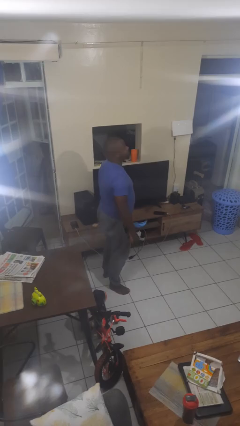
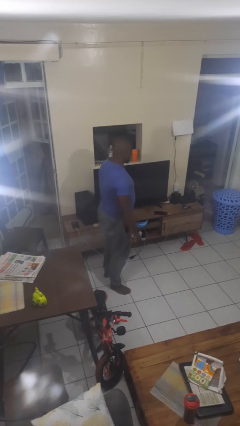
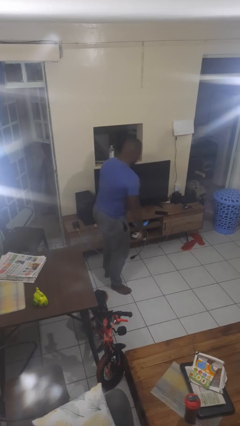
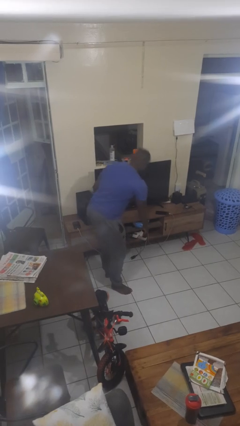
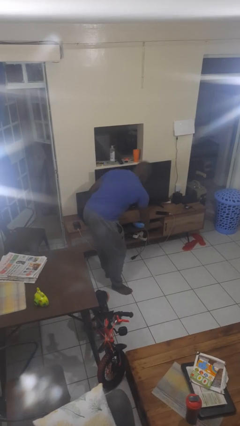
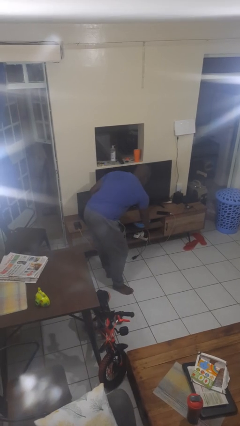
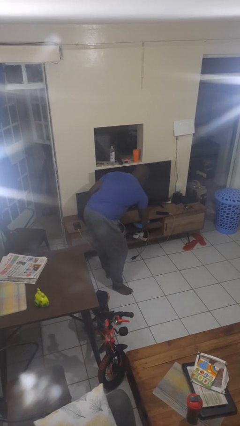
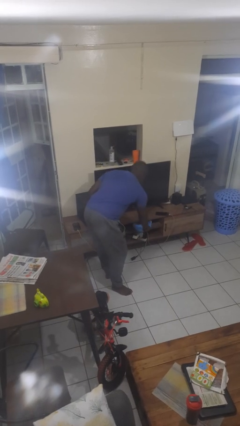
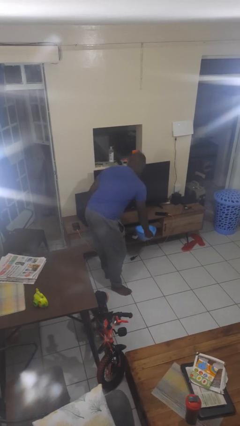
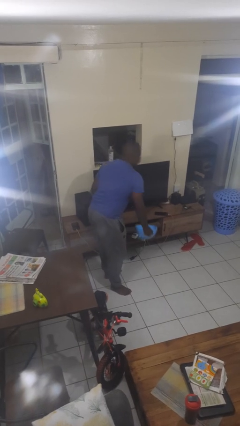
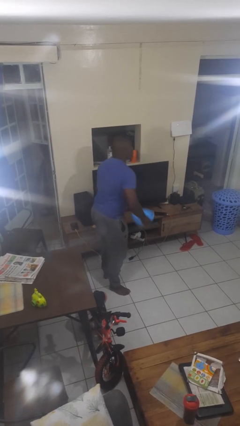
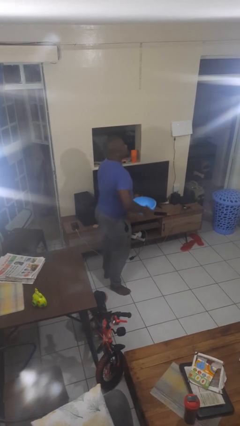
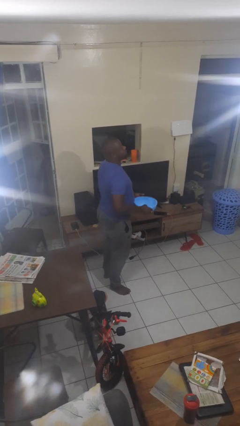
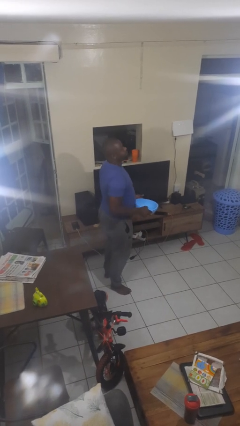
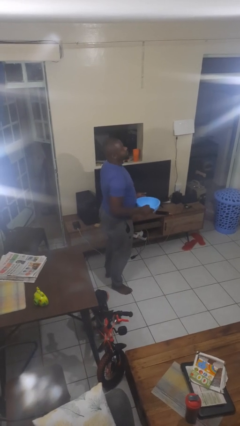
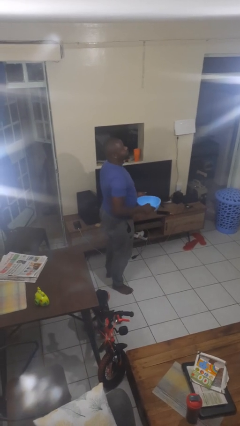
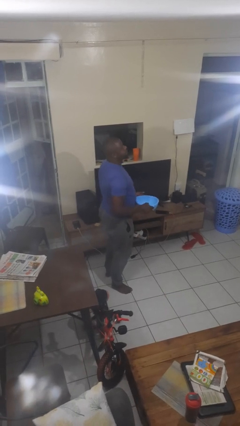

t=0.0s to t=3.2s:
person picks up object from cabinet

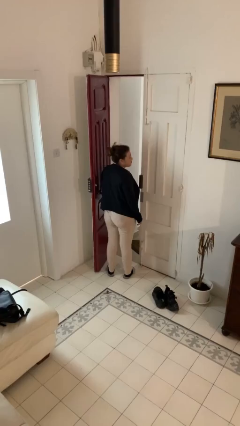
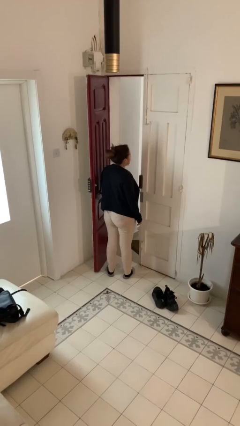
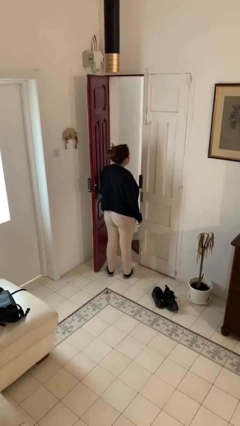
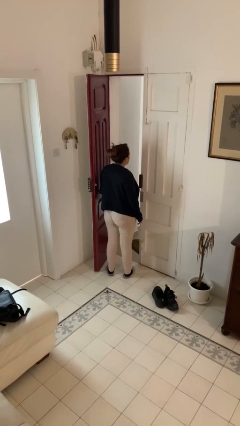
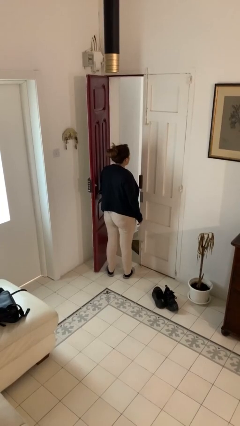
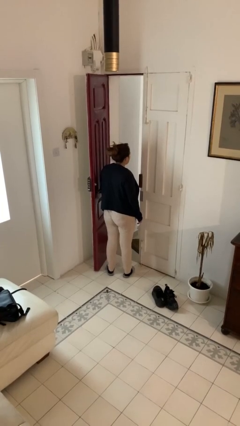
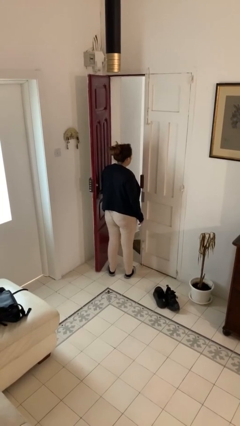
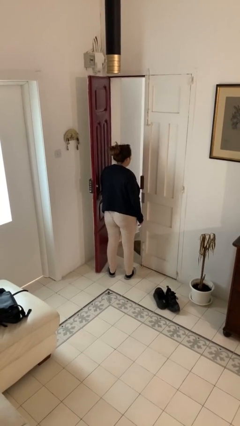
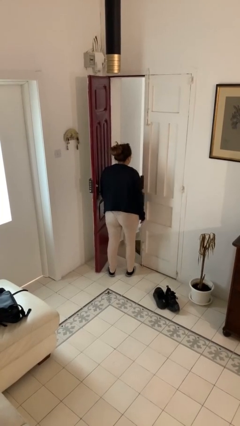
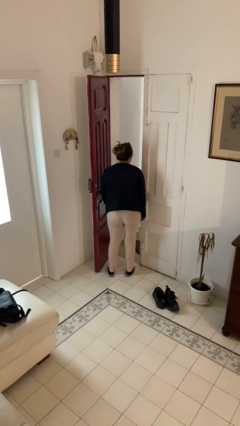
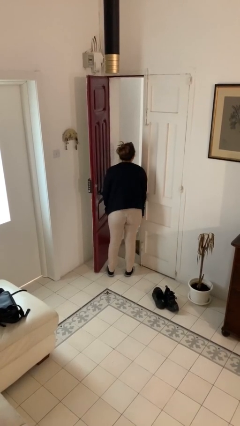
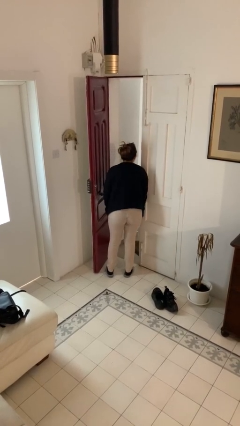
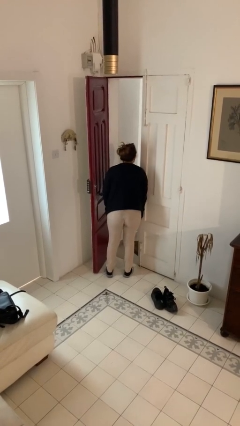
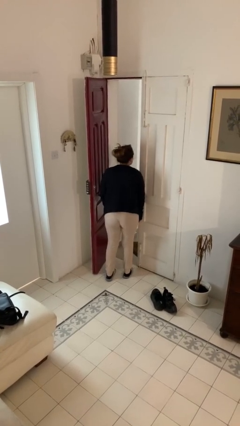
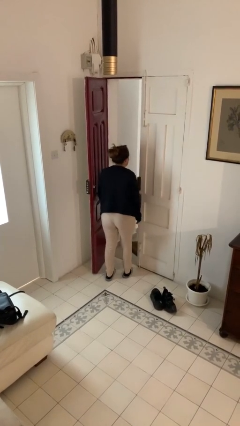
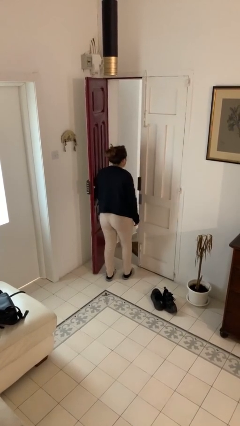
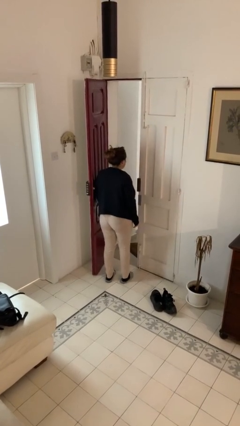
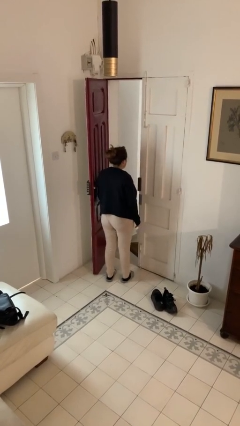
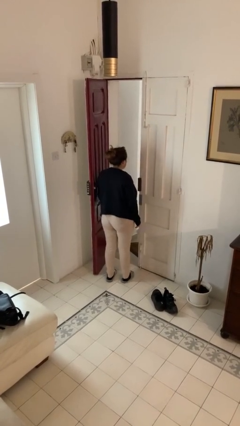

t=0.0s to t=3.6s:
person bumps into wall

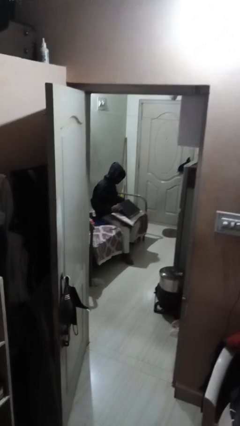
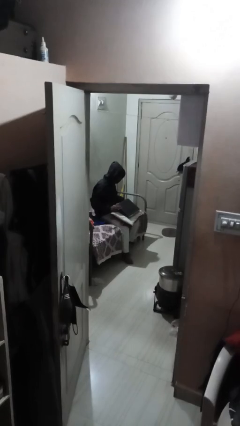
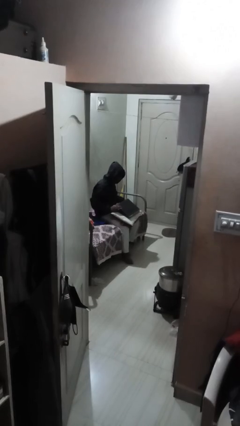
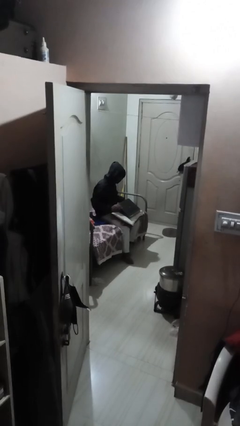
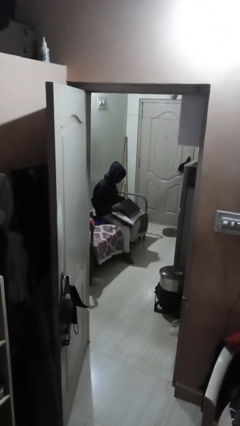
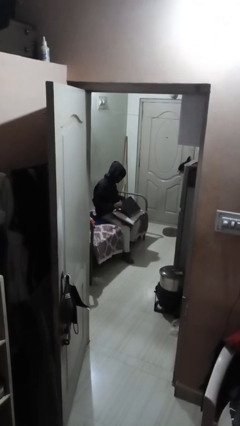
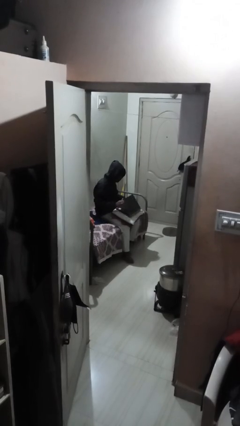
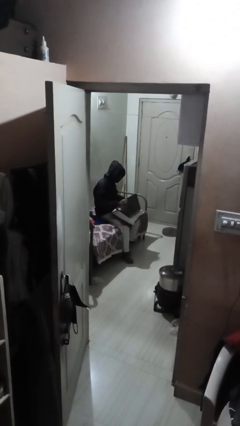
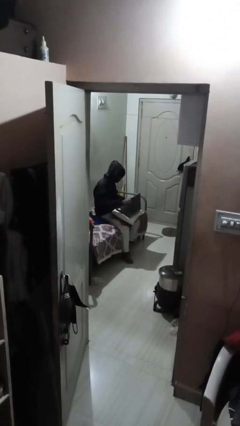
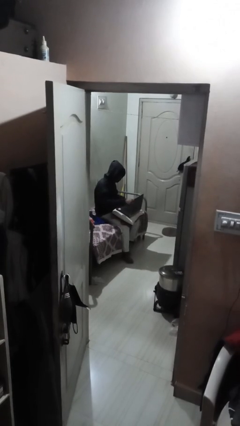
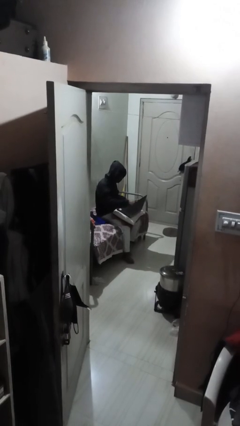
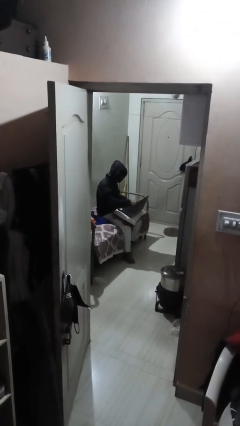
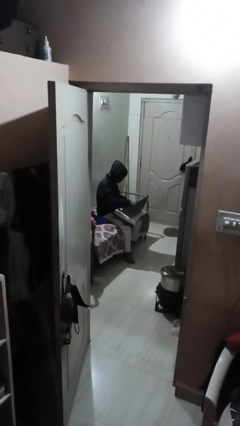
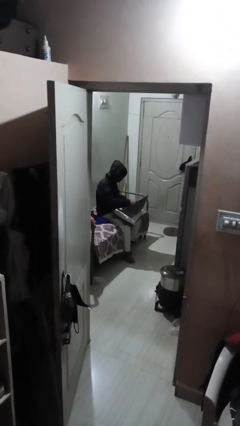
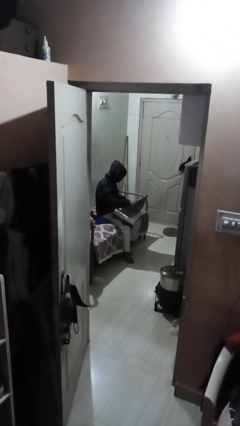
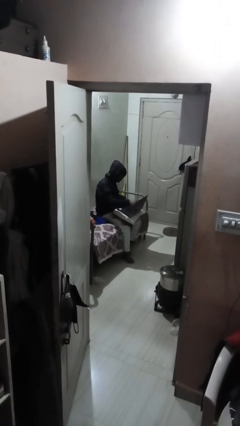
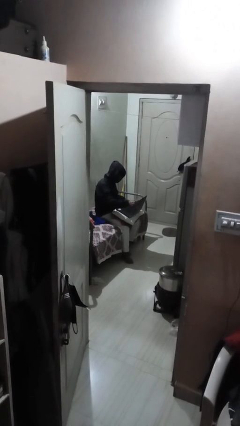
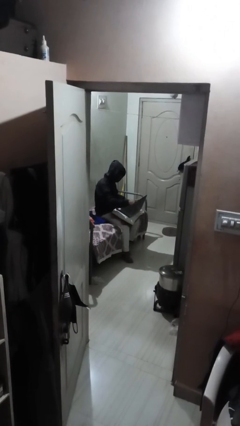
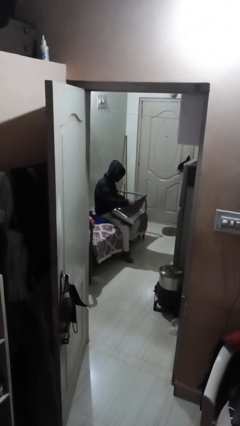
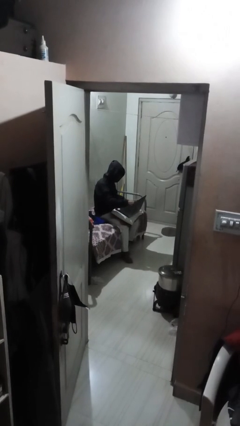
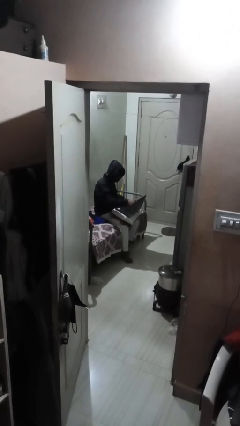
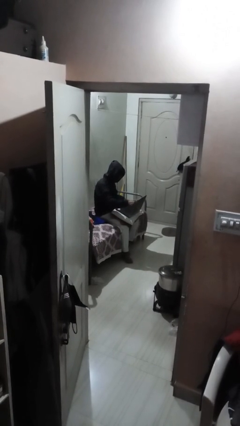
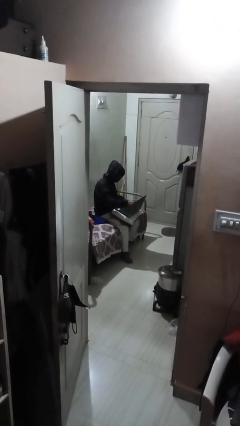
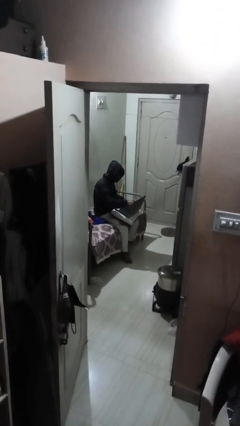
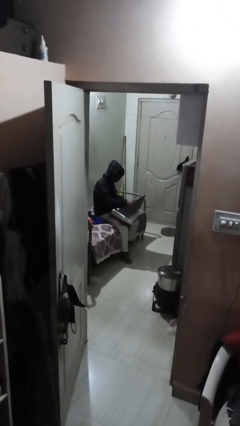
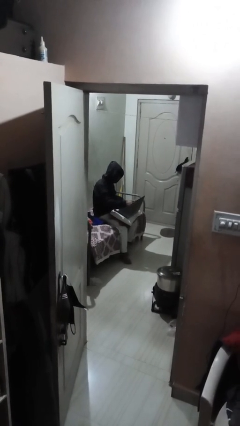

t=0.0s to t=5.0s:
person interacts with laptop

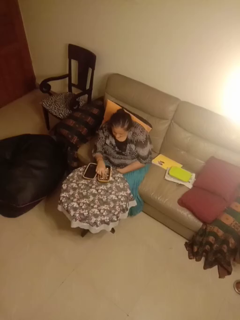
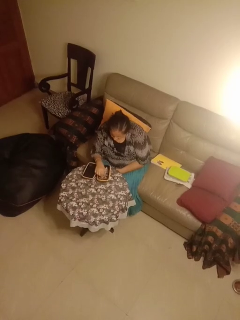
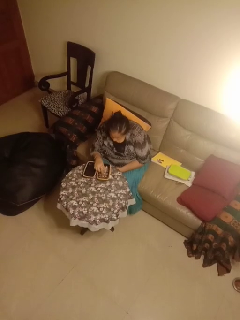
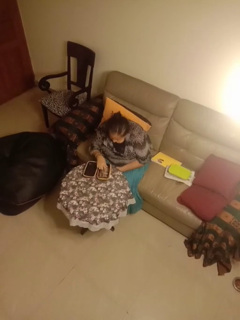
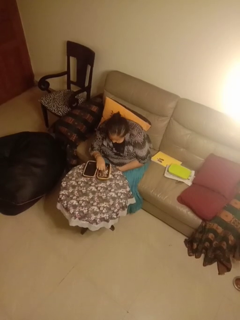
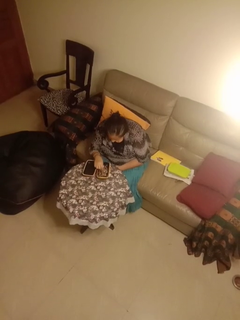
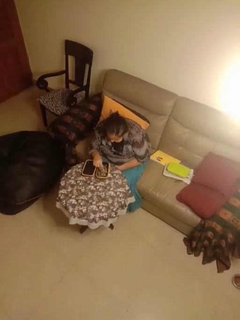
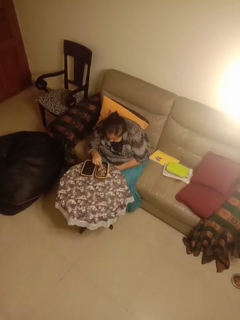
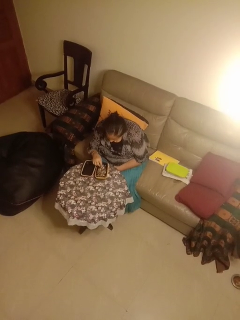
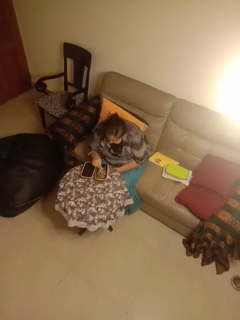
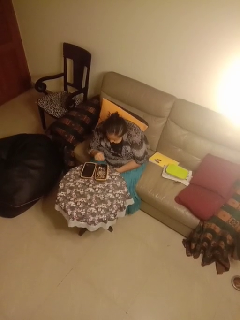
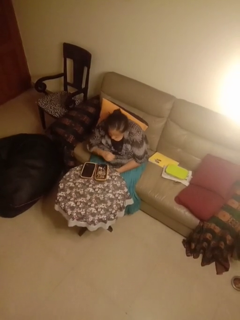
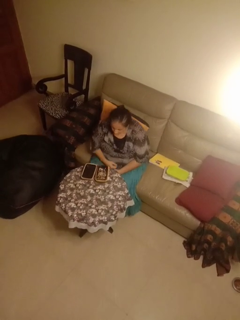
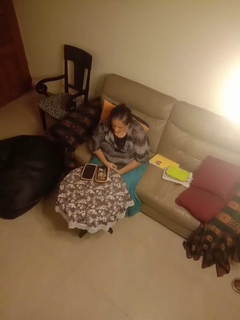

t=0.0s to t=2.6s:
person searches jewelry box

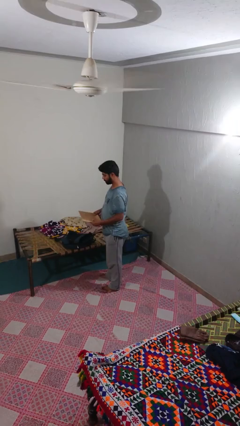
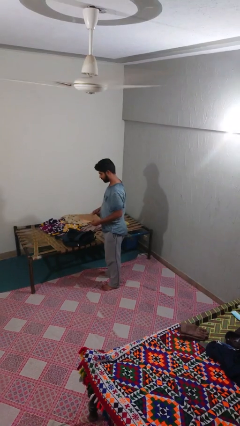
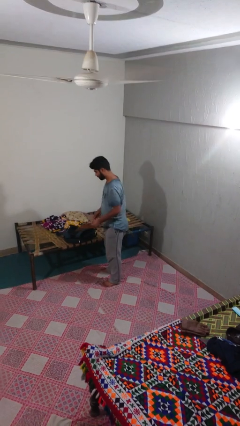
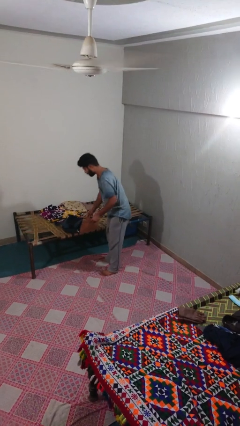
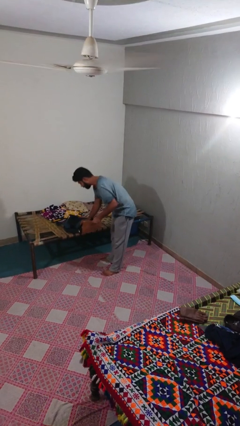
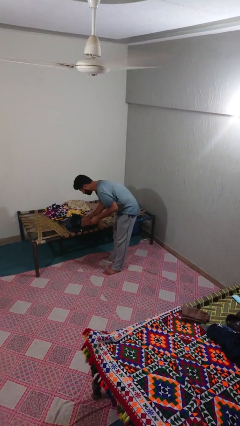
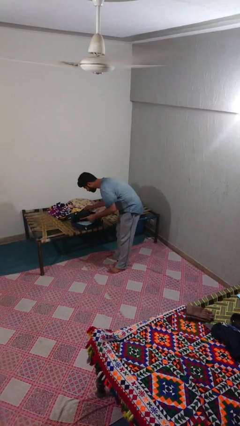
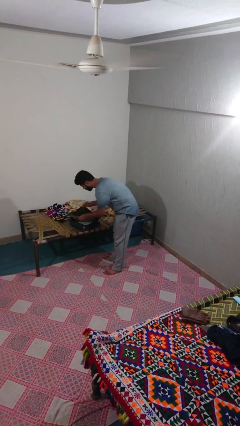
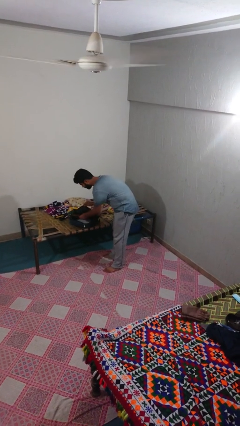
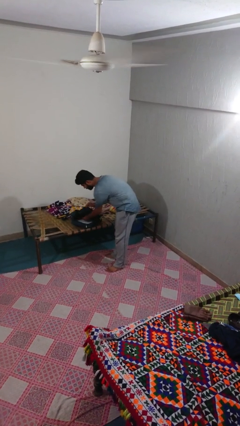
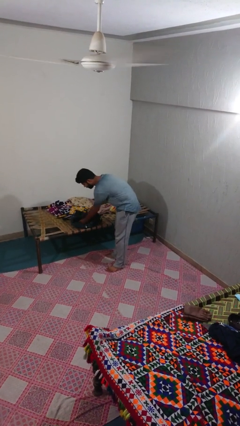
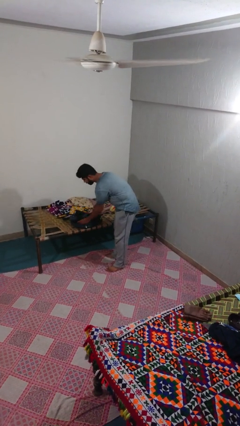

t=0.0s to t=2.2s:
person puts object into backpack

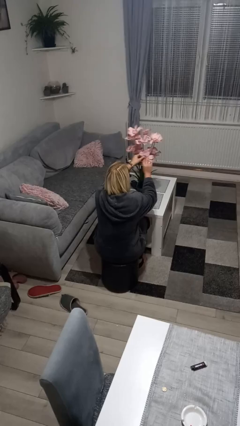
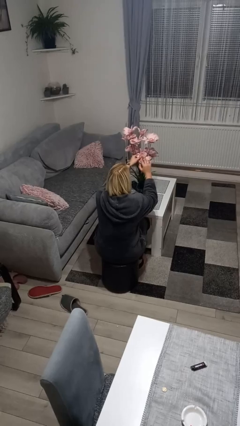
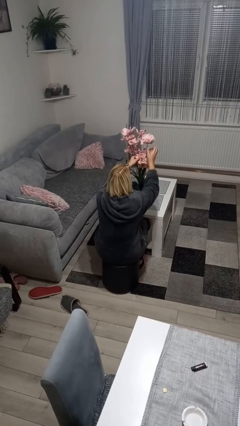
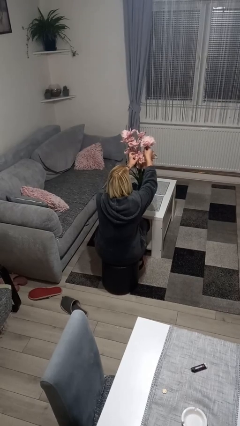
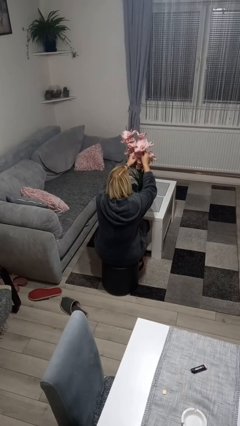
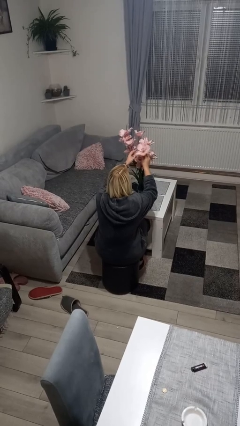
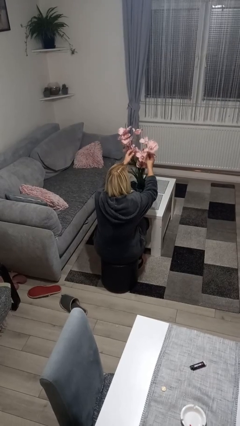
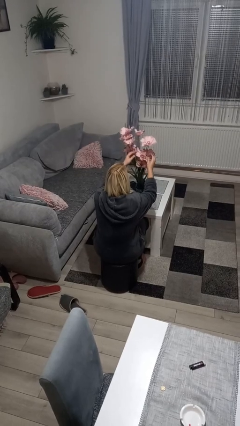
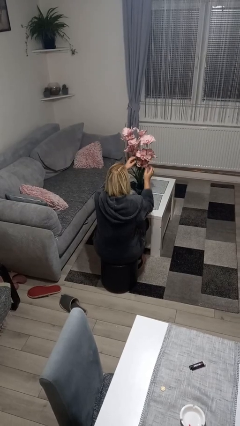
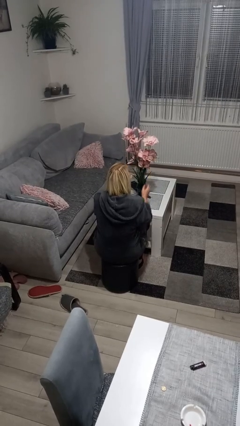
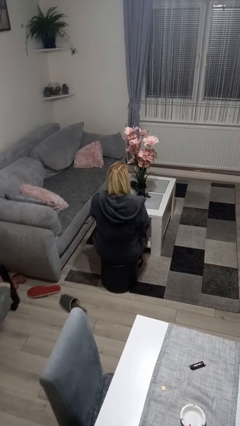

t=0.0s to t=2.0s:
person arranges flowers in vase
